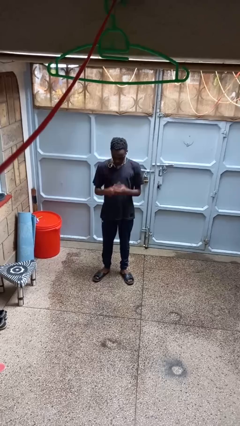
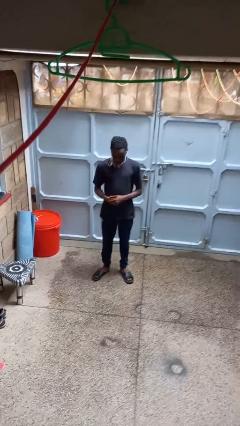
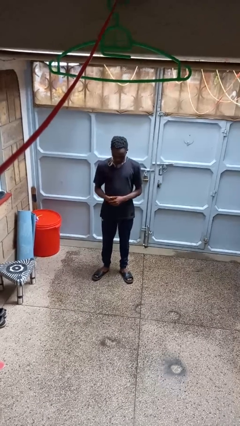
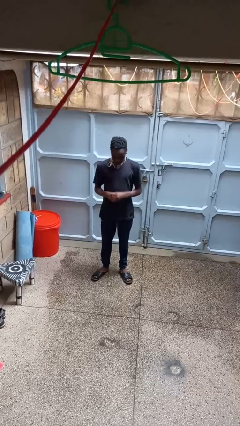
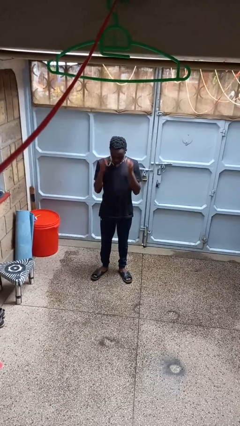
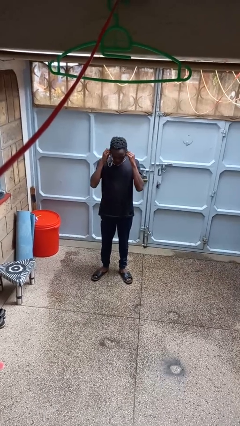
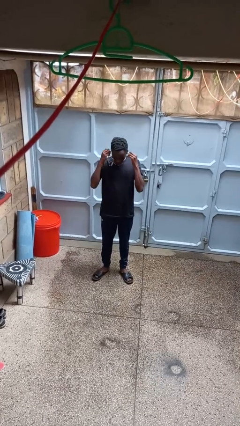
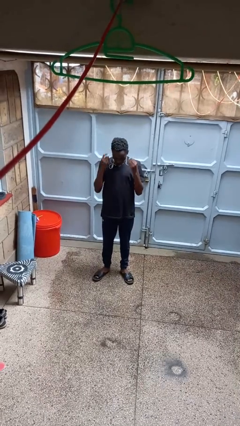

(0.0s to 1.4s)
person takes off headphones

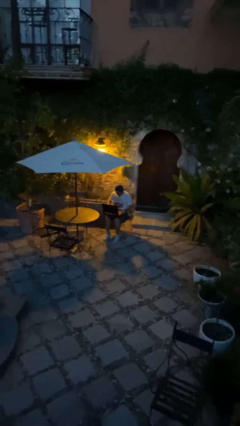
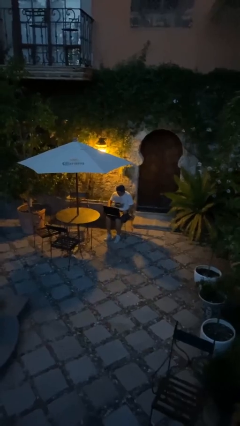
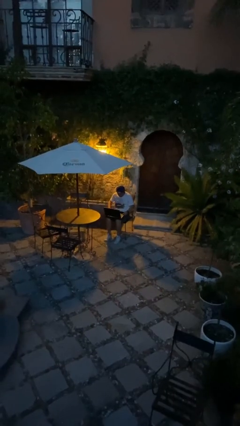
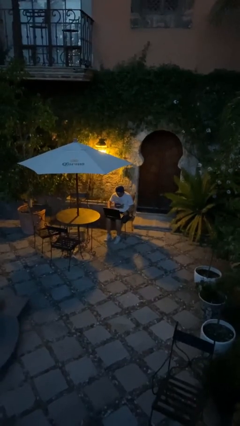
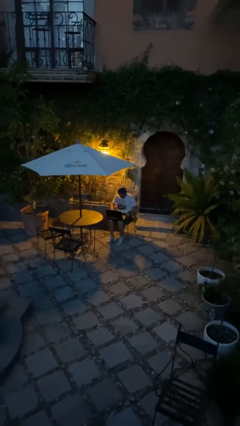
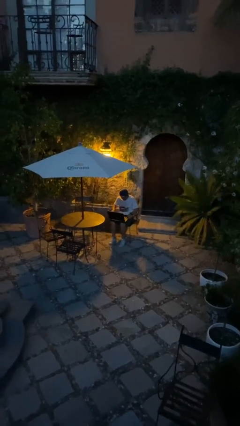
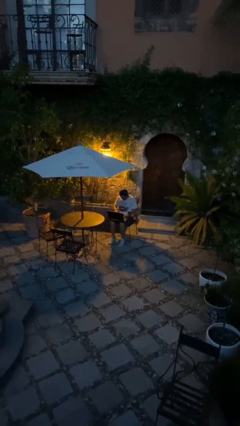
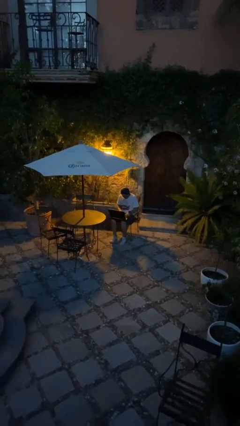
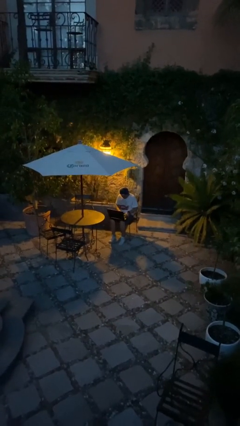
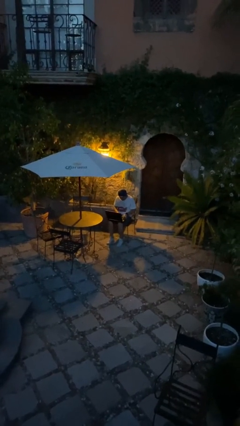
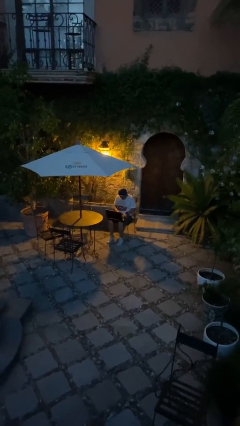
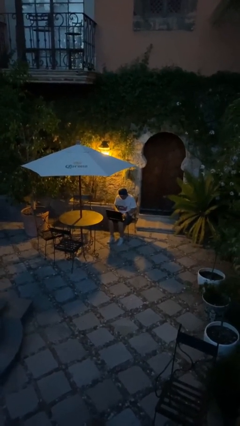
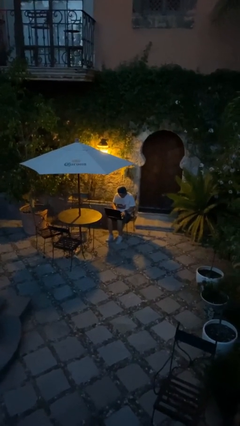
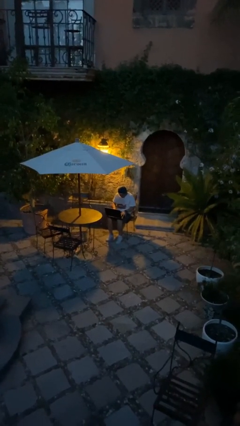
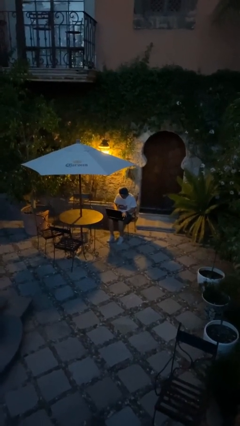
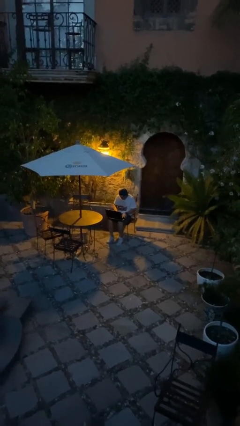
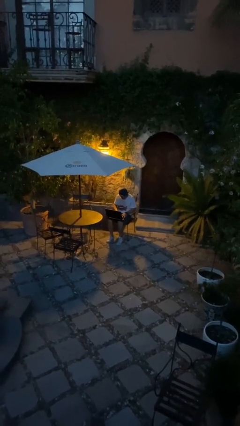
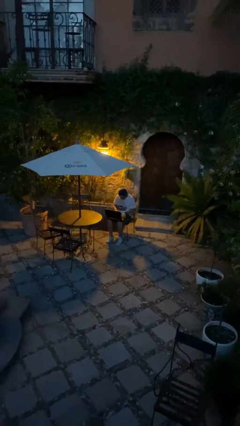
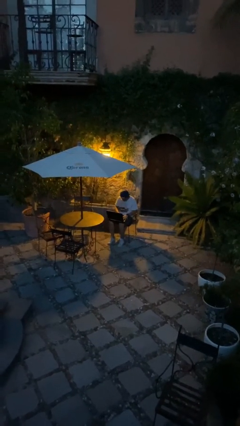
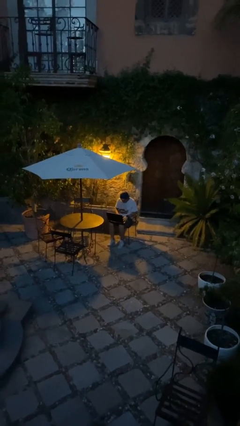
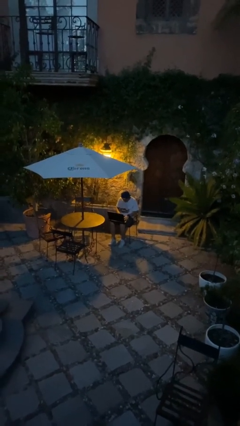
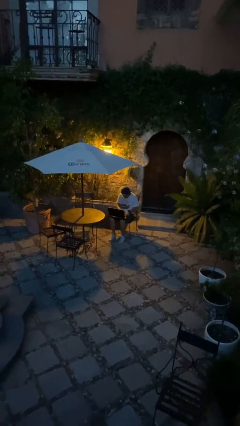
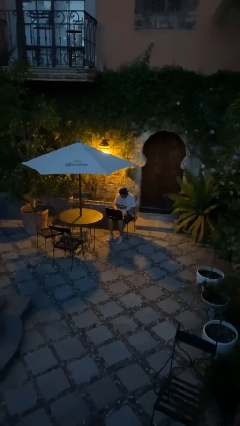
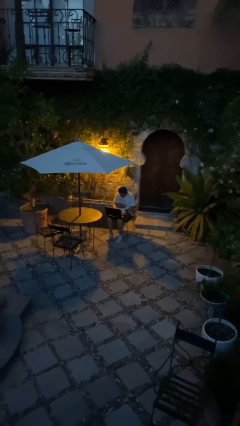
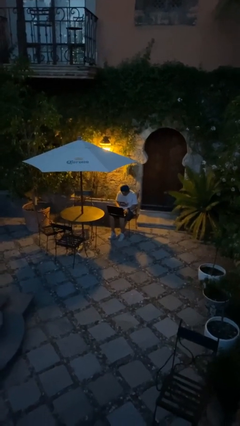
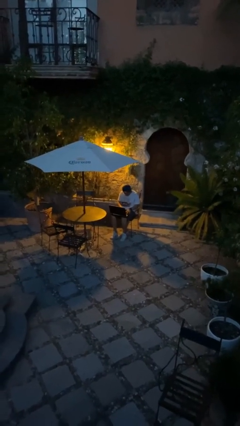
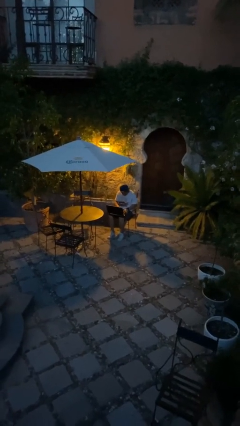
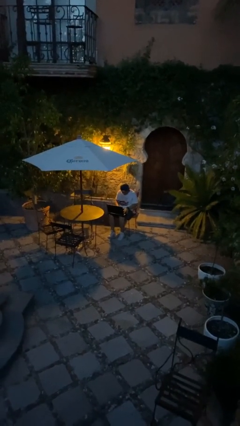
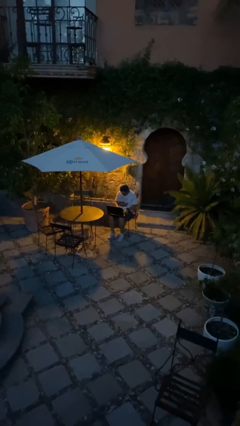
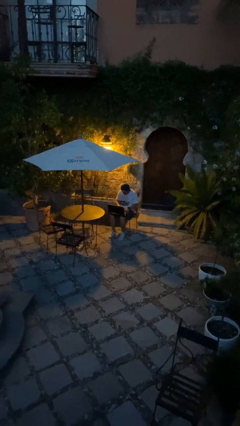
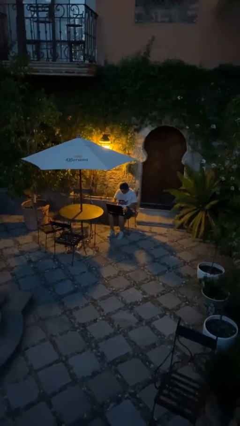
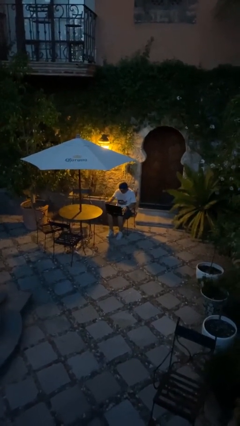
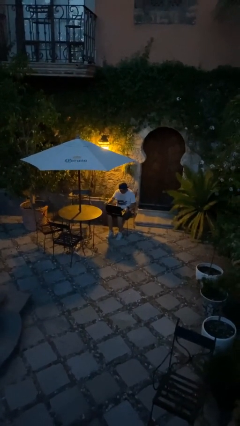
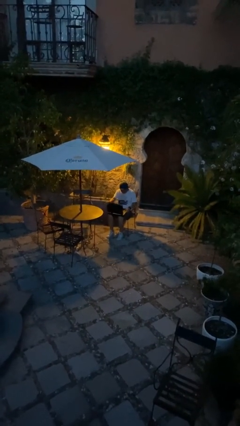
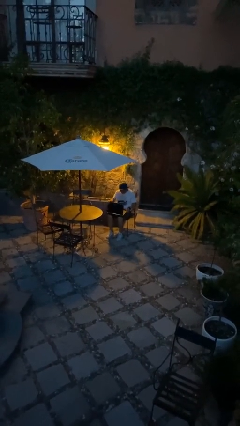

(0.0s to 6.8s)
person interacts with laptop

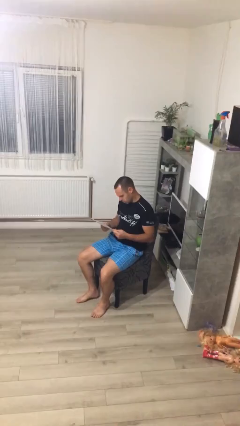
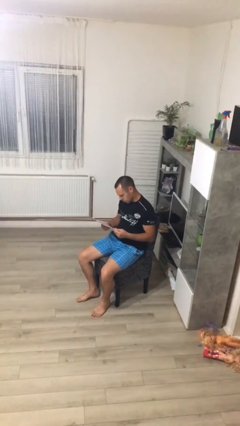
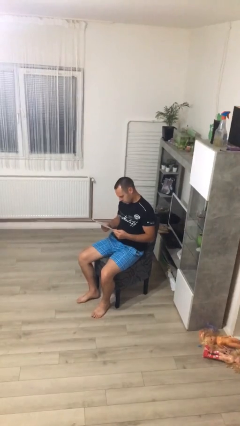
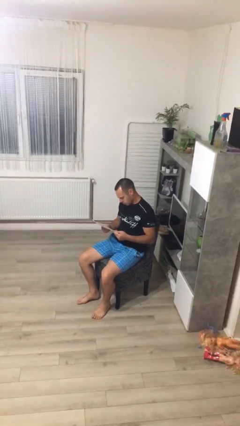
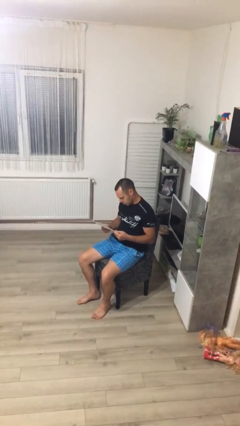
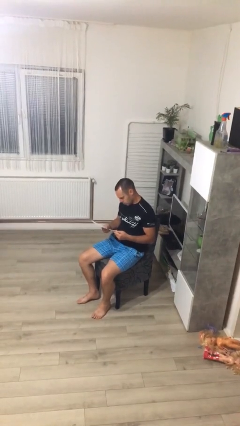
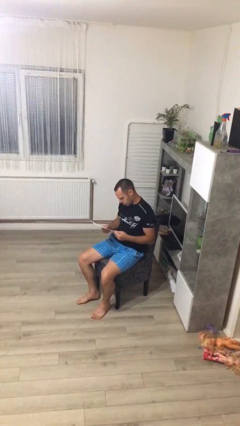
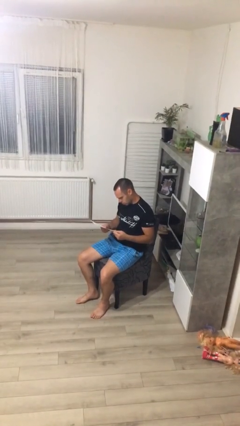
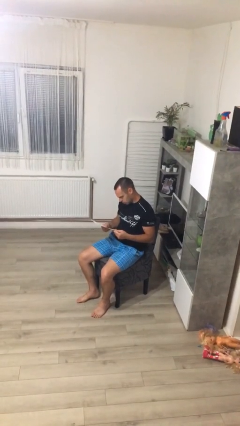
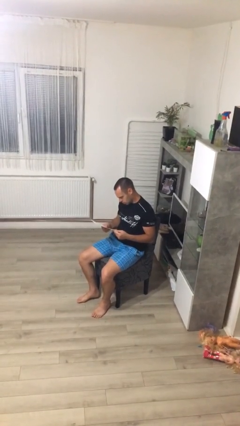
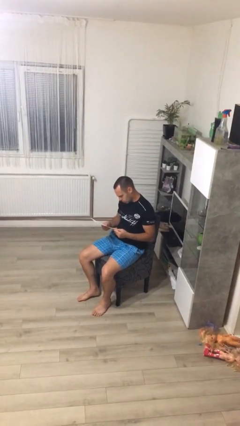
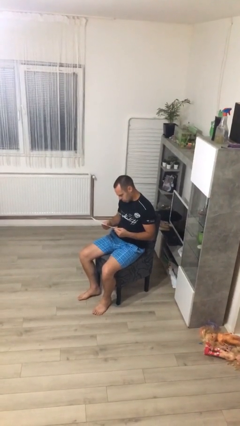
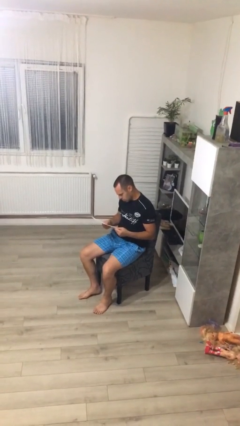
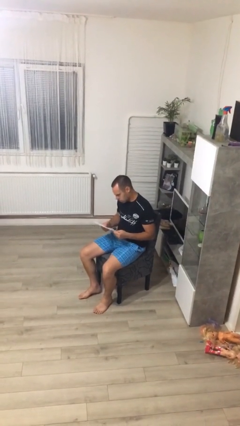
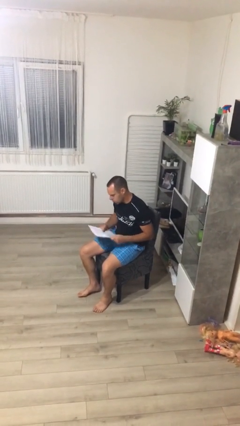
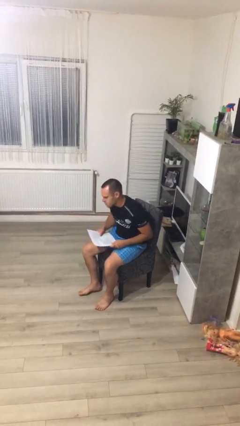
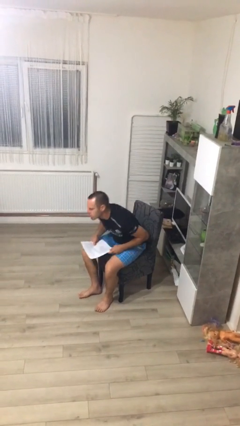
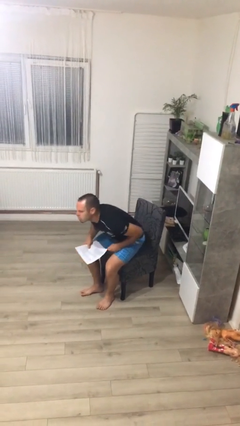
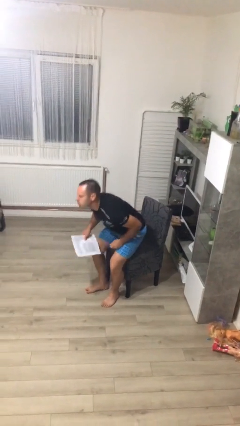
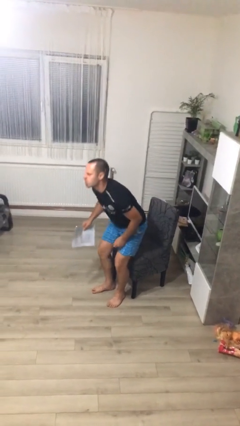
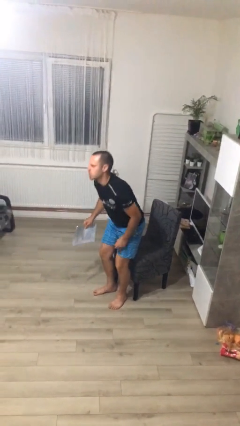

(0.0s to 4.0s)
person reads document

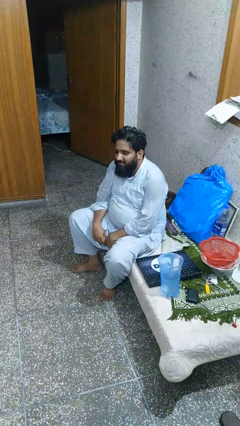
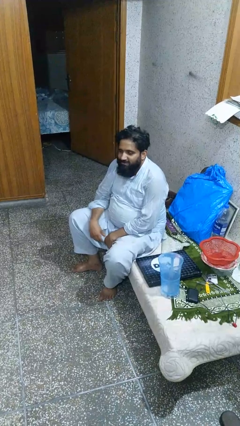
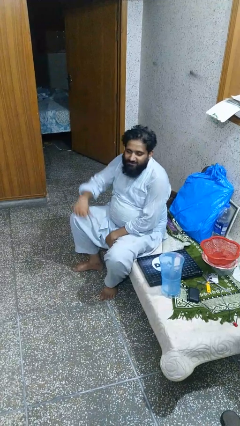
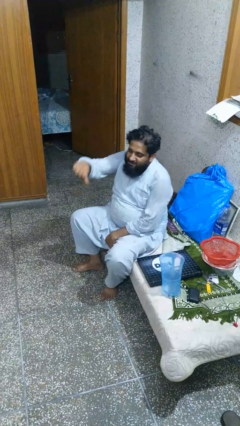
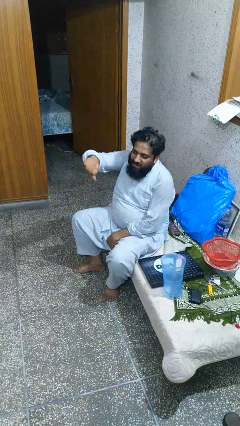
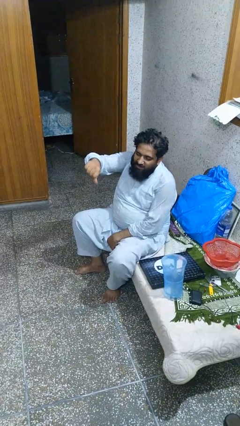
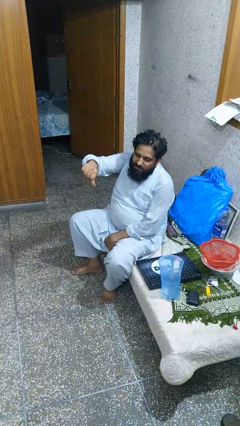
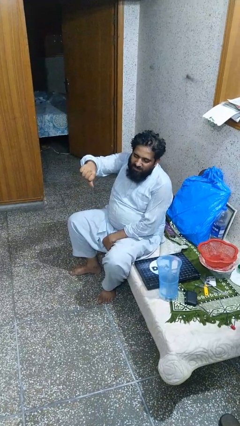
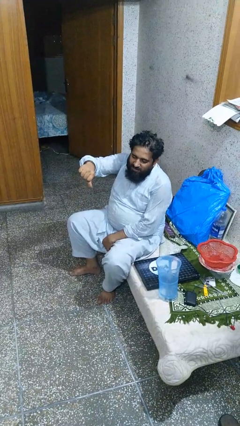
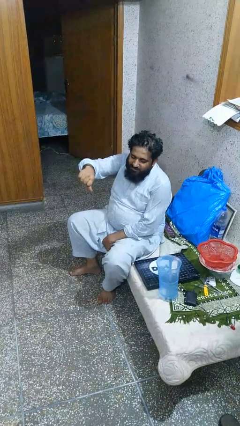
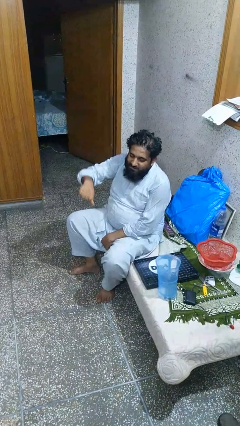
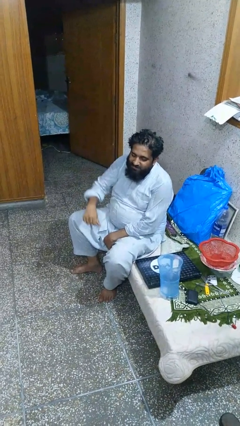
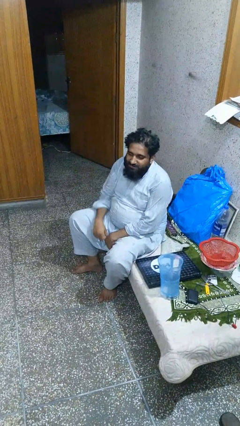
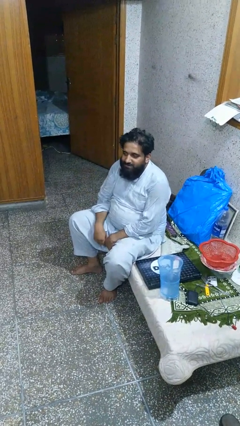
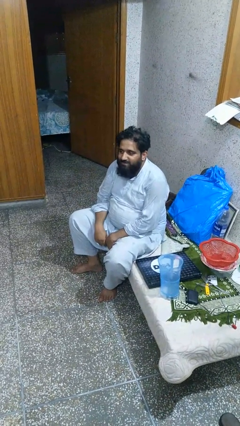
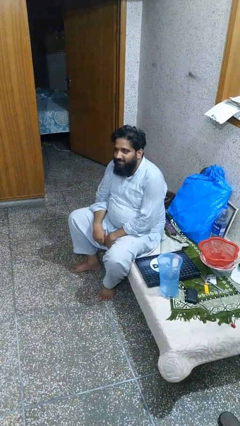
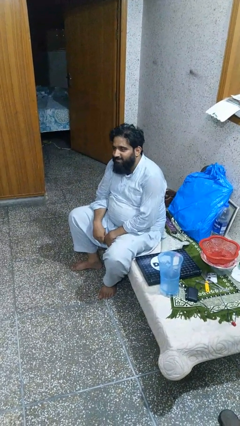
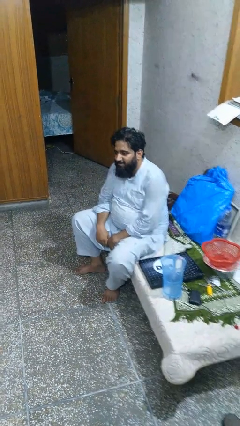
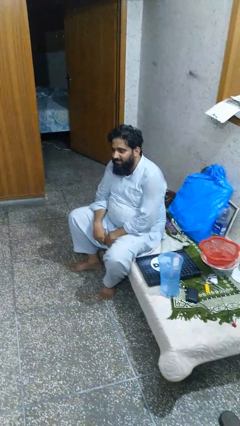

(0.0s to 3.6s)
person gestures thumbs down

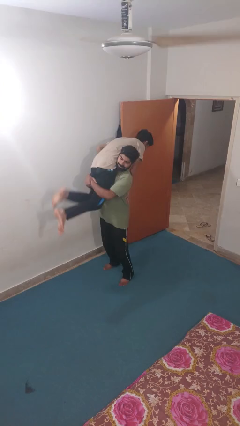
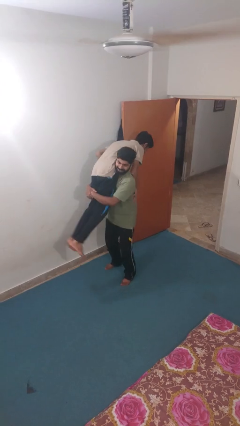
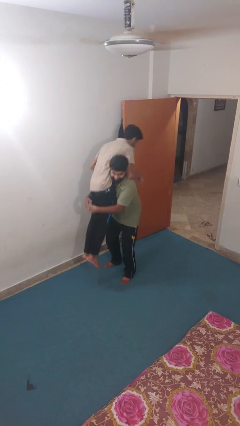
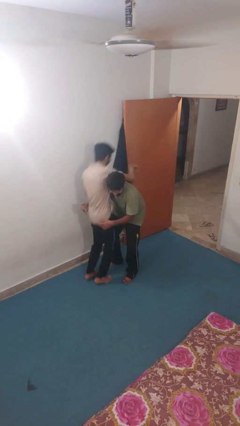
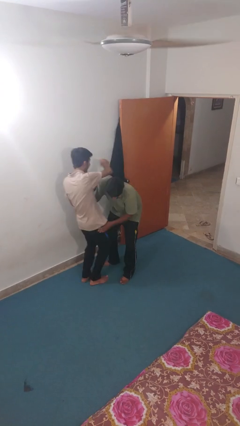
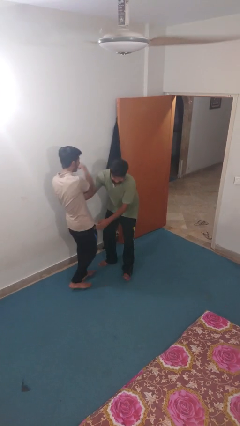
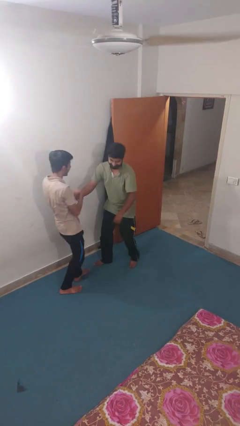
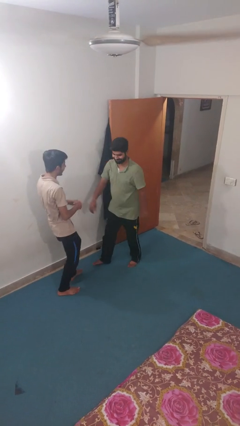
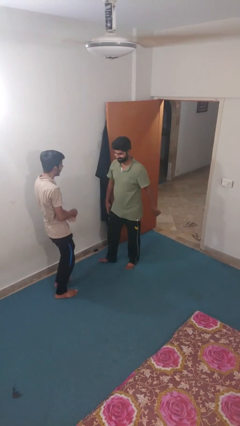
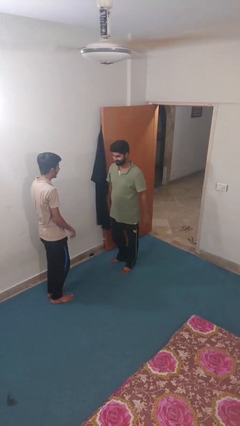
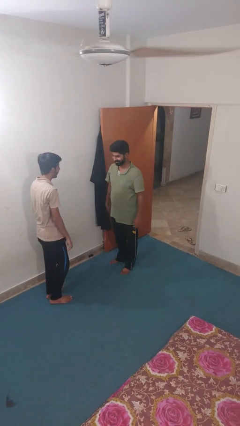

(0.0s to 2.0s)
person puts down person
